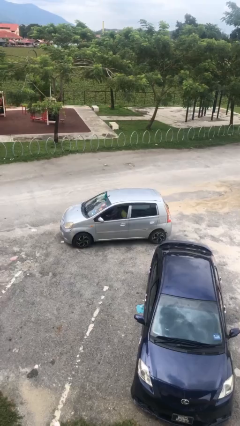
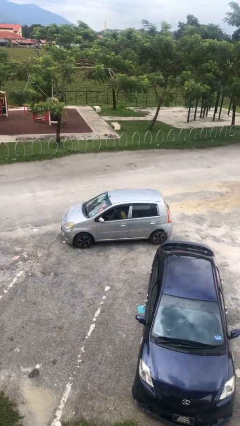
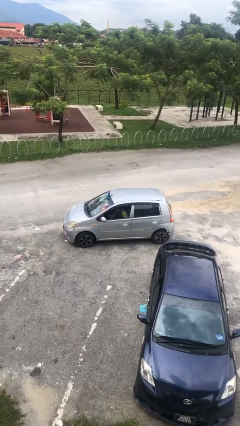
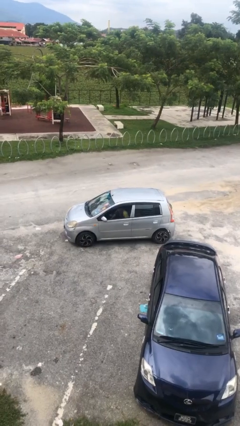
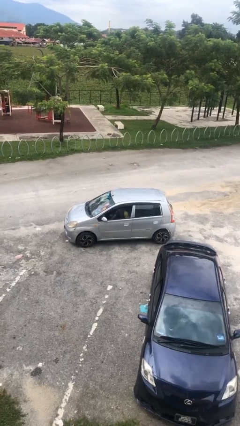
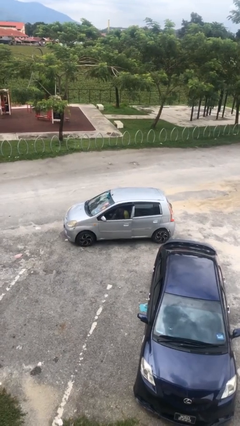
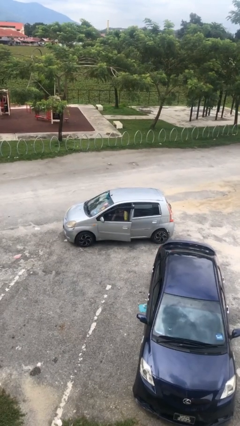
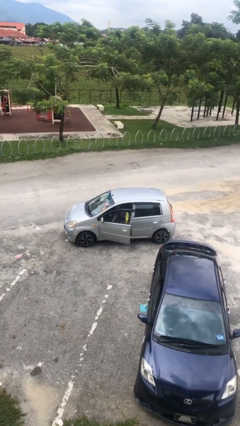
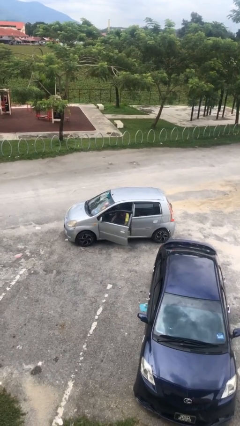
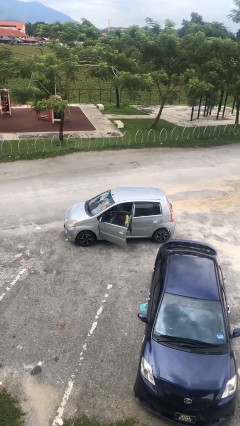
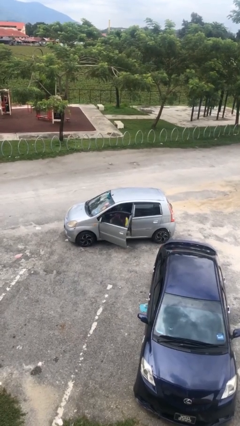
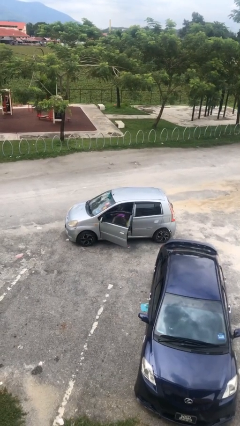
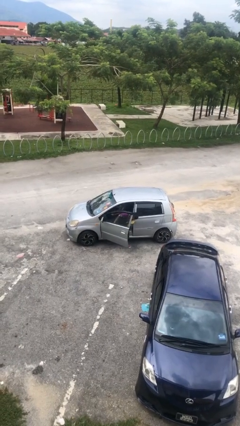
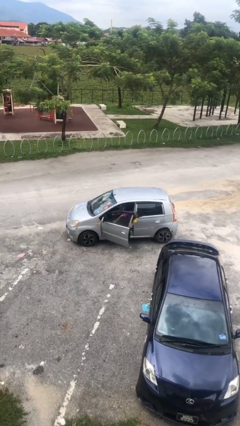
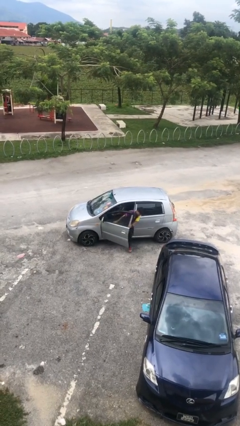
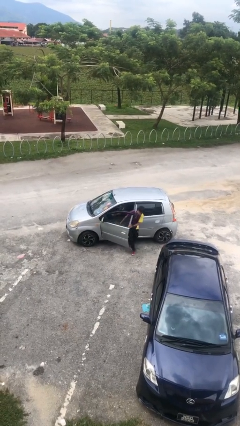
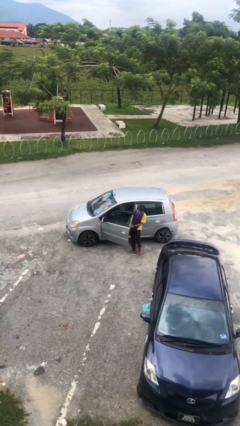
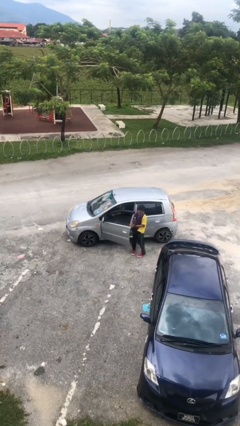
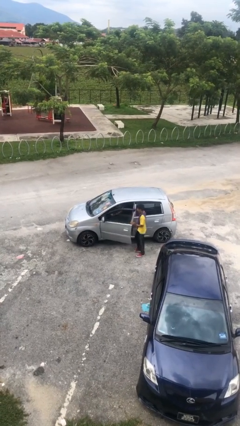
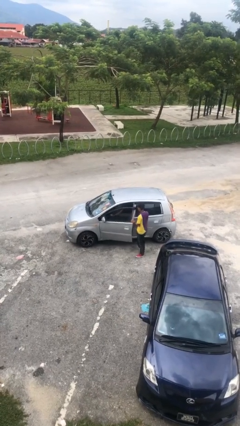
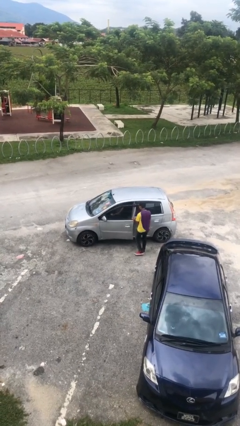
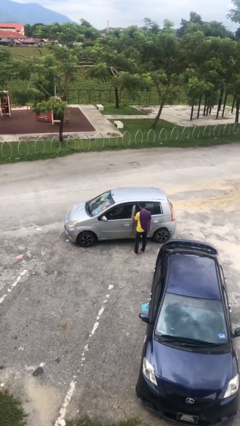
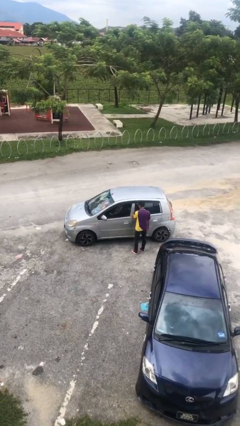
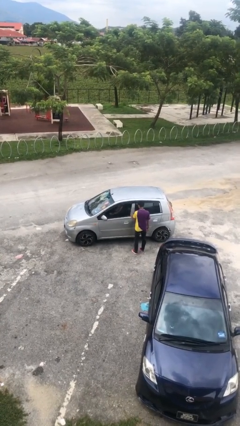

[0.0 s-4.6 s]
car drops off person

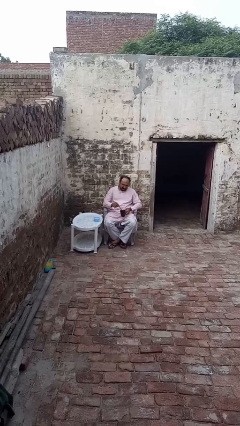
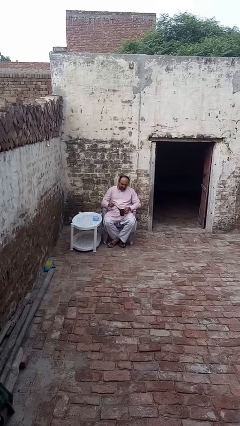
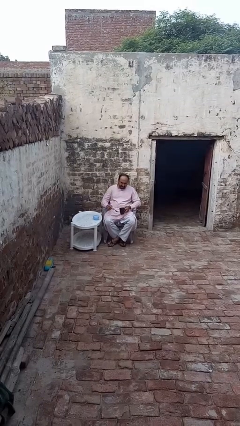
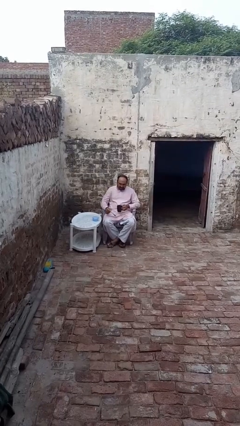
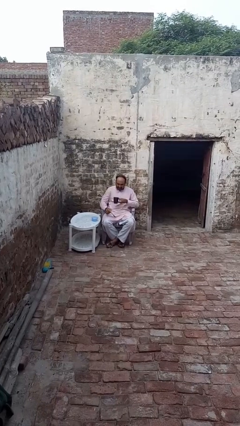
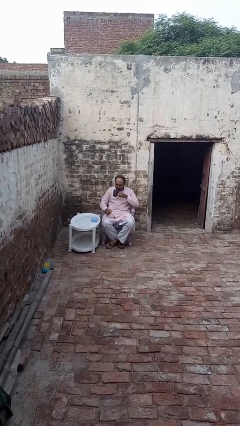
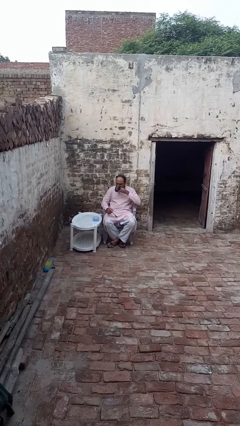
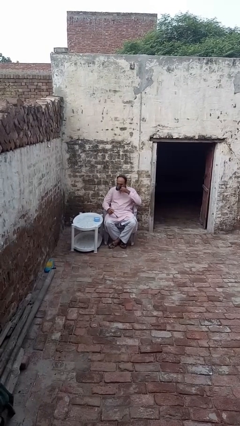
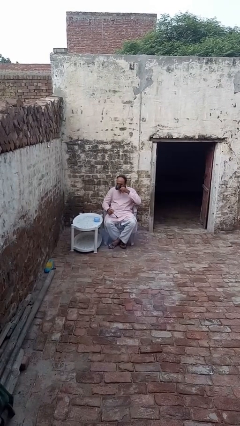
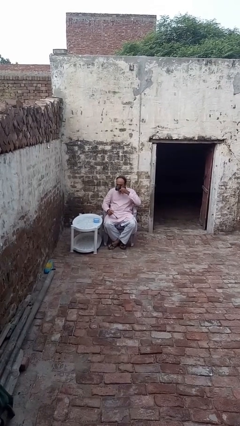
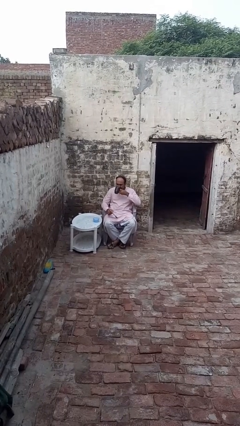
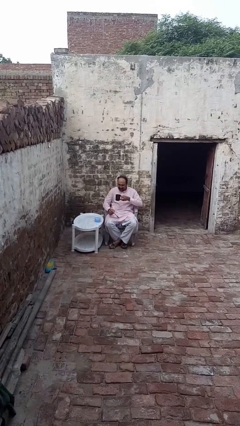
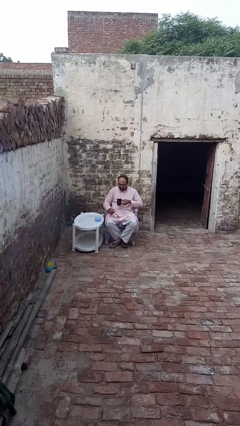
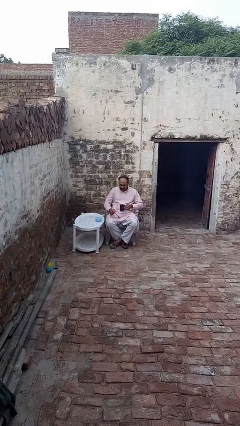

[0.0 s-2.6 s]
person drinks from mug

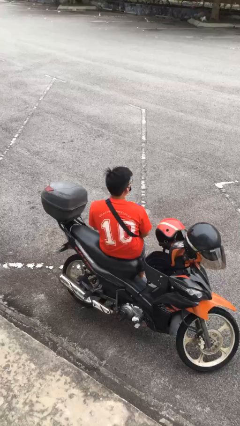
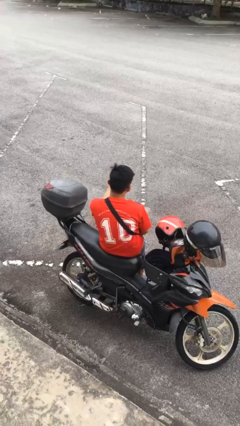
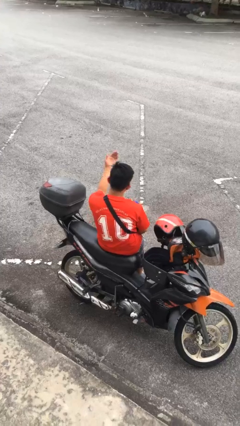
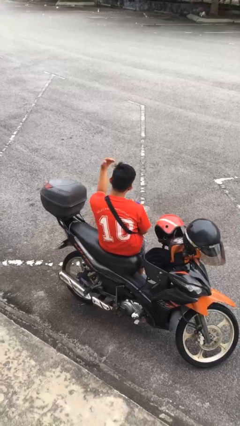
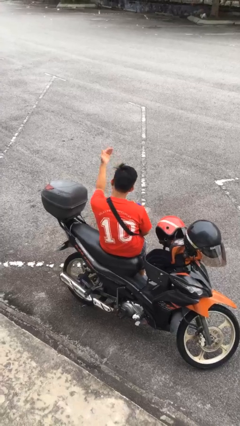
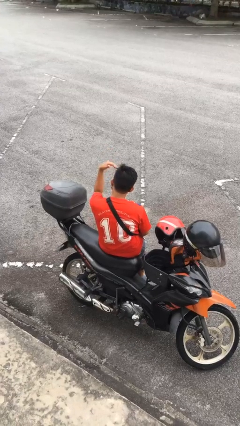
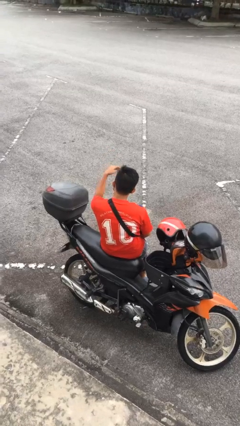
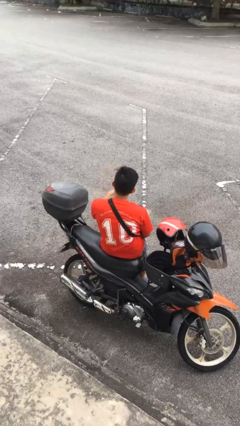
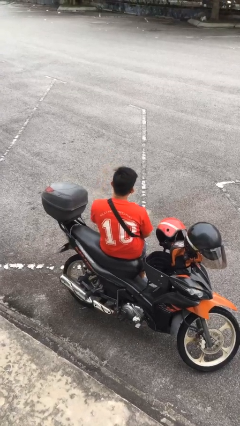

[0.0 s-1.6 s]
person gestures come here

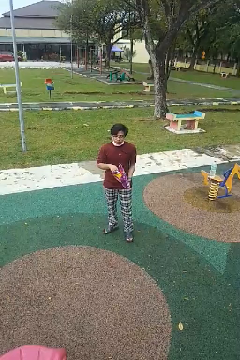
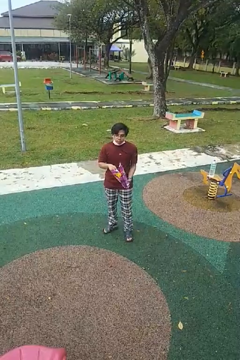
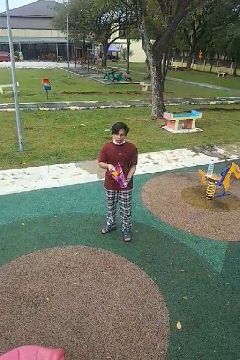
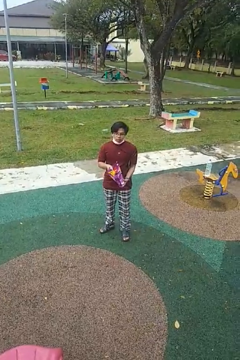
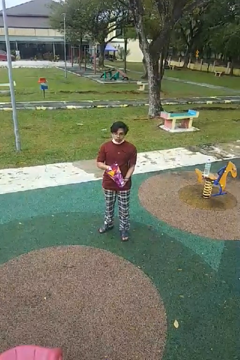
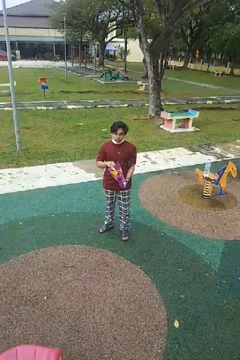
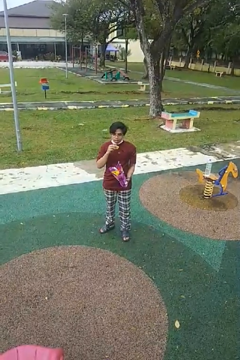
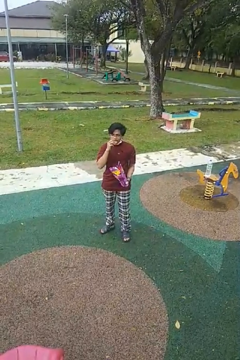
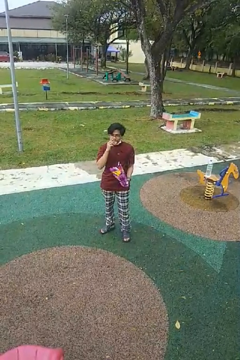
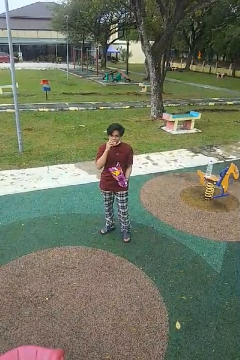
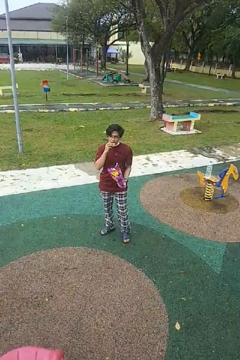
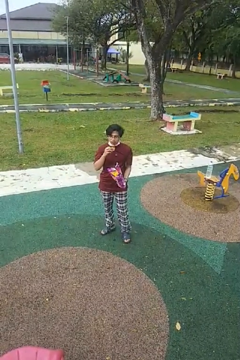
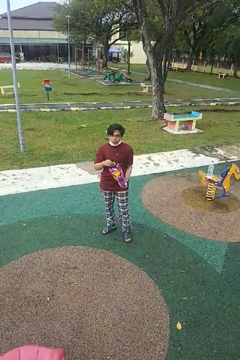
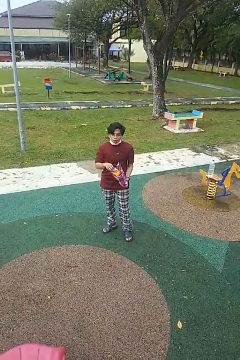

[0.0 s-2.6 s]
person eats snack from bag

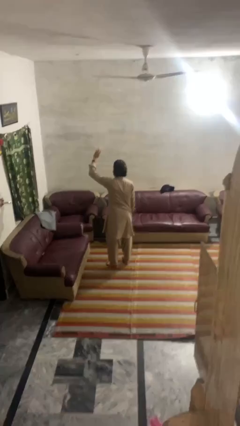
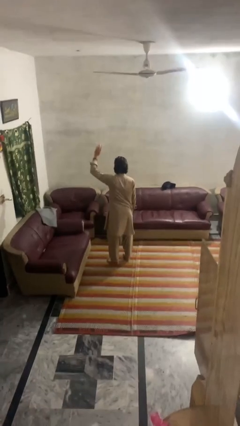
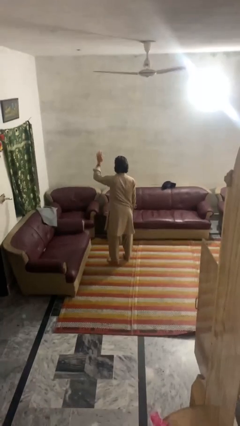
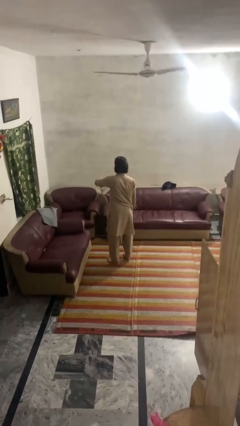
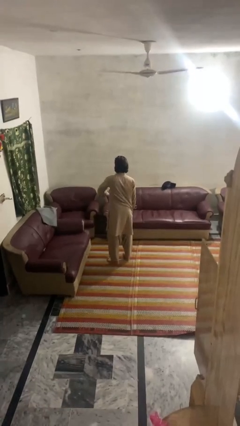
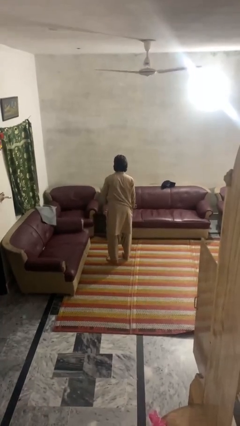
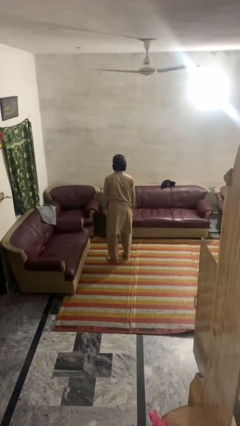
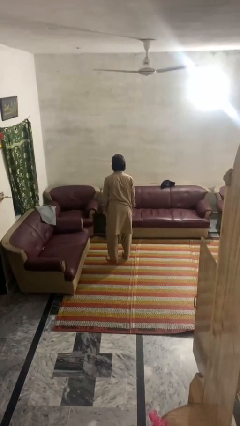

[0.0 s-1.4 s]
person gestures swipe down

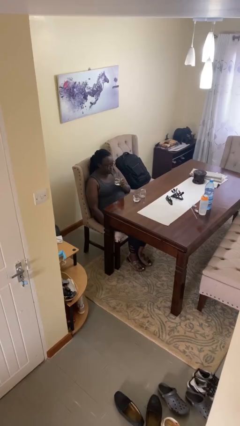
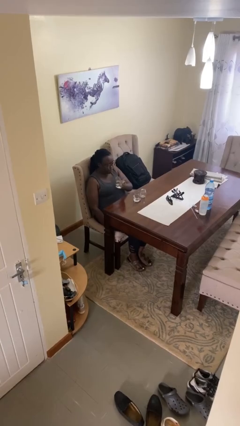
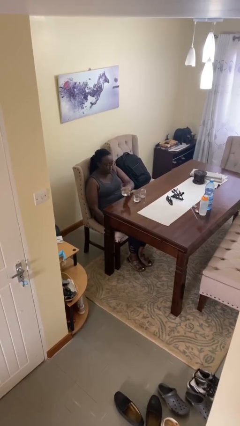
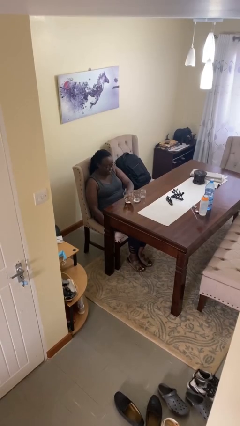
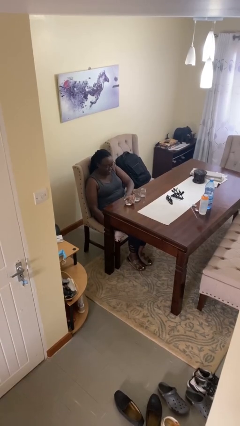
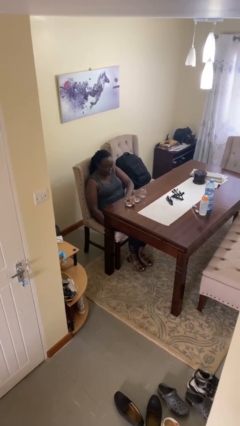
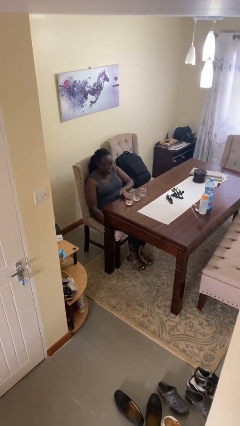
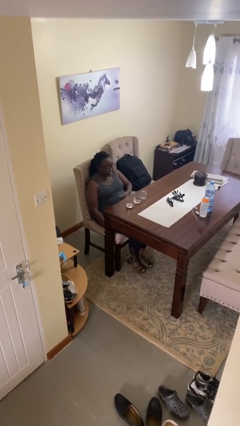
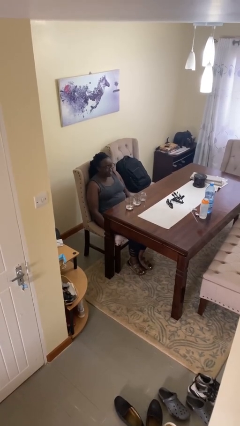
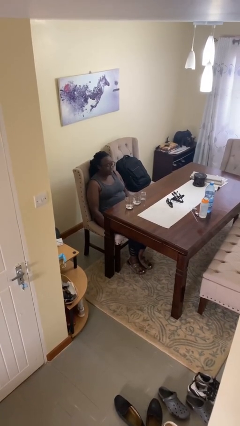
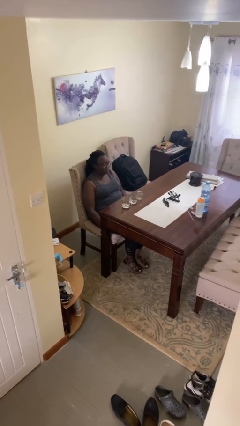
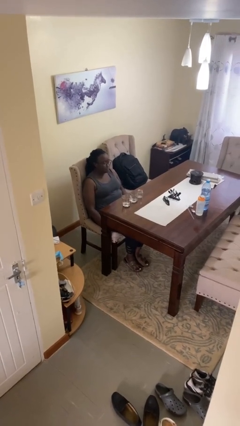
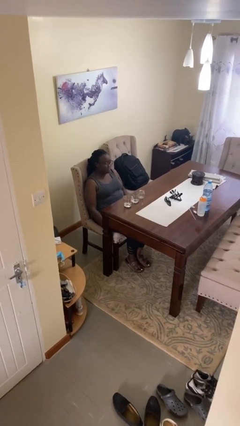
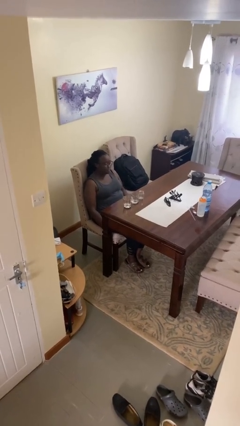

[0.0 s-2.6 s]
person puts down object on table

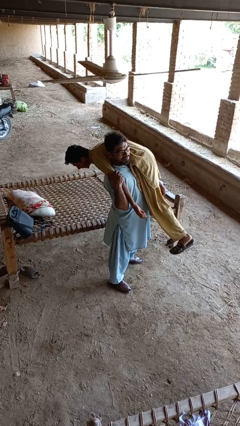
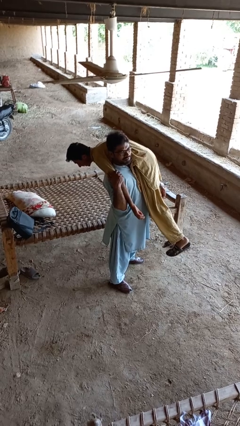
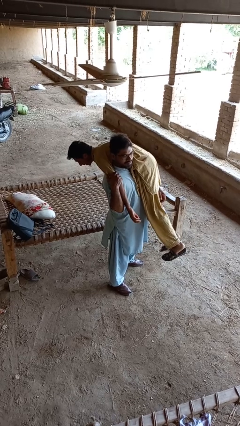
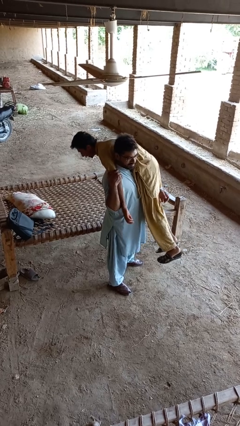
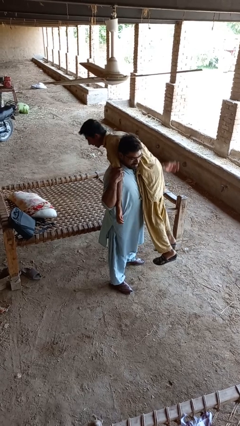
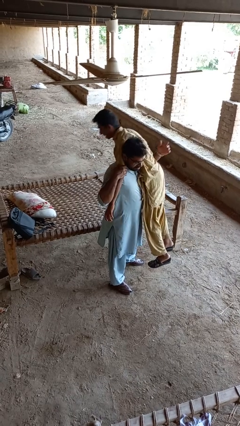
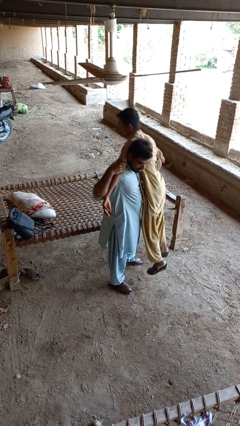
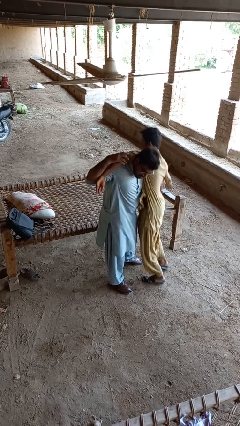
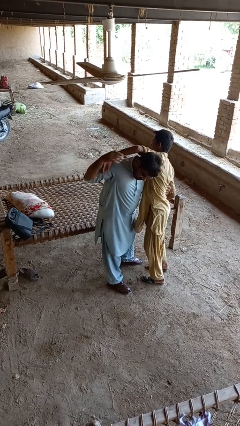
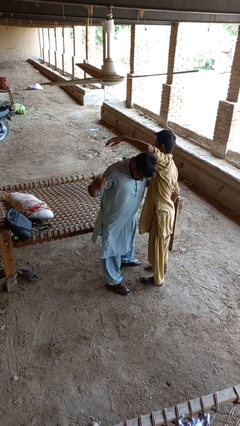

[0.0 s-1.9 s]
person puts down person

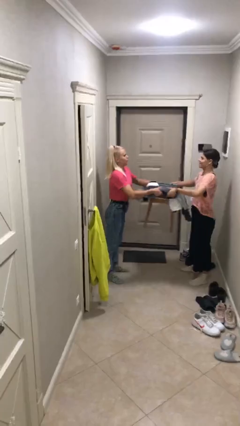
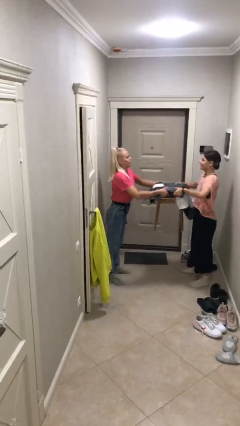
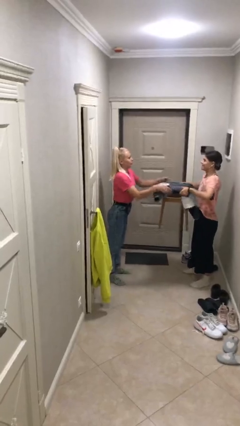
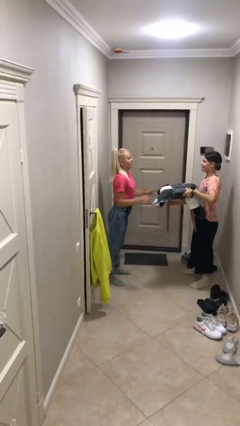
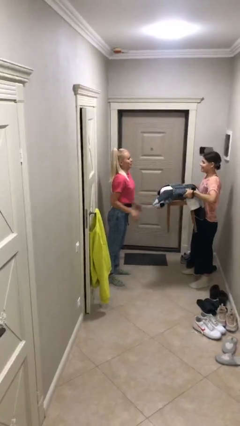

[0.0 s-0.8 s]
person transfers object to person
